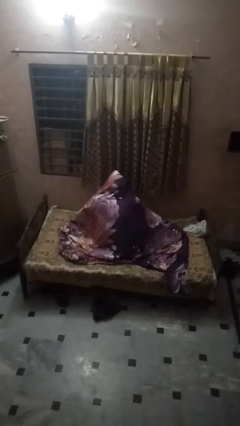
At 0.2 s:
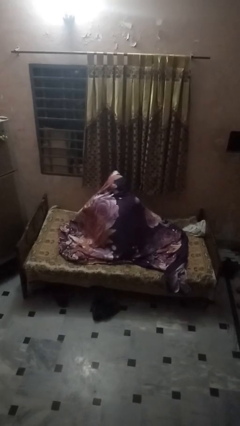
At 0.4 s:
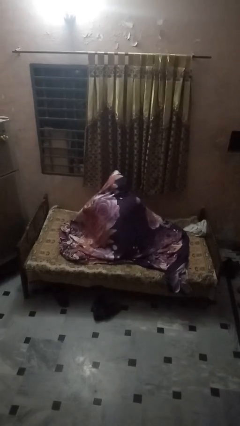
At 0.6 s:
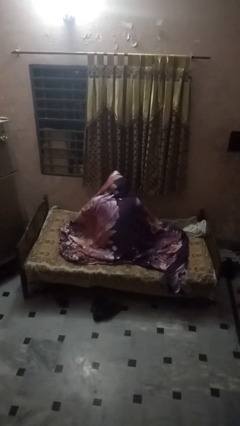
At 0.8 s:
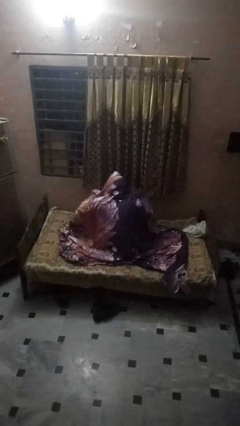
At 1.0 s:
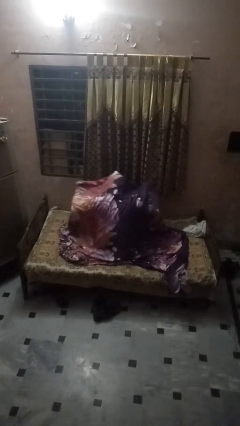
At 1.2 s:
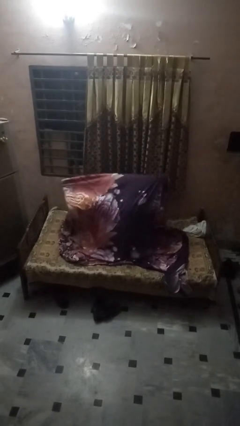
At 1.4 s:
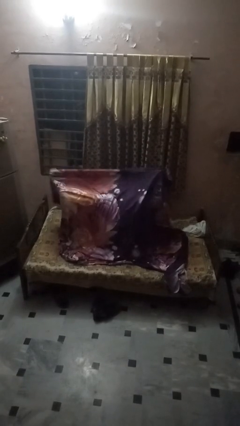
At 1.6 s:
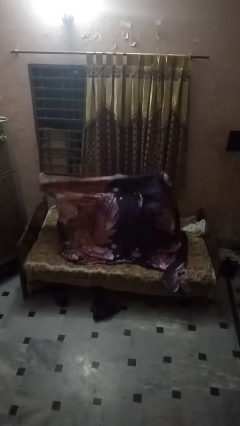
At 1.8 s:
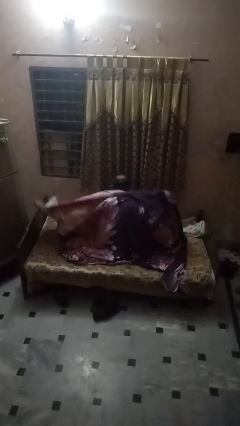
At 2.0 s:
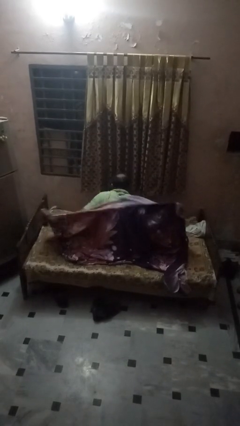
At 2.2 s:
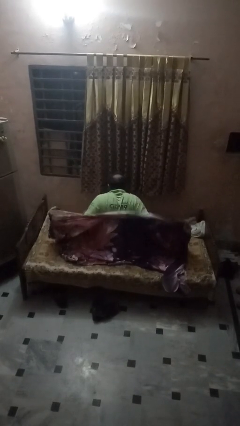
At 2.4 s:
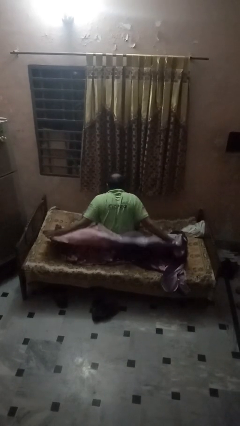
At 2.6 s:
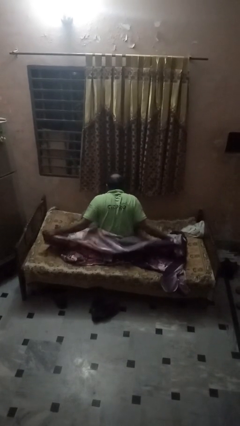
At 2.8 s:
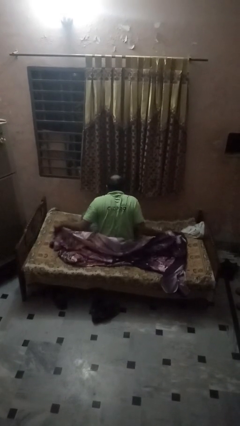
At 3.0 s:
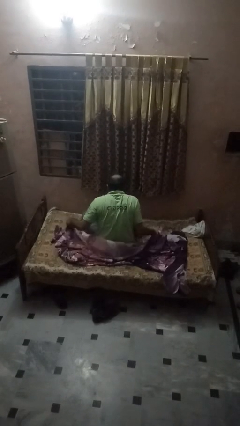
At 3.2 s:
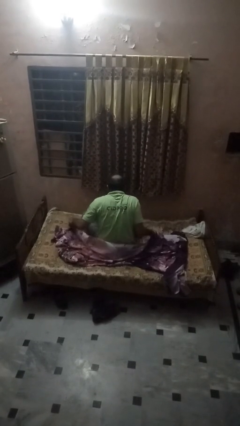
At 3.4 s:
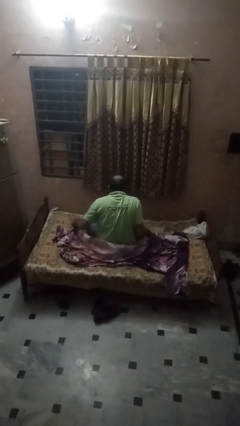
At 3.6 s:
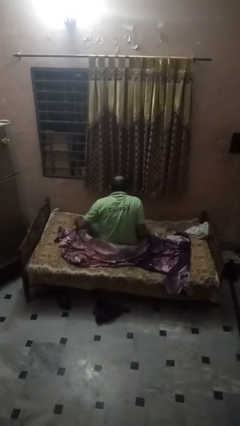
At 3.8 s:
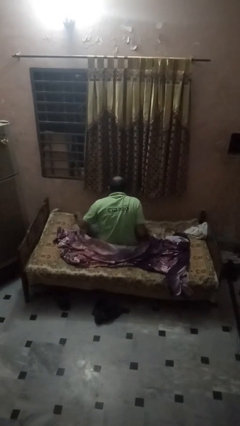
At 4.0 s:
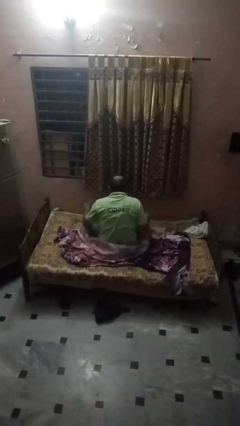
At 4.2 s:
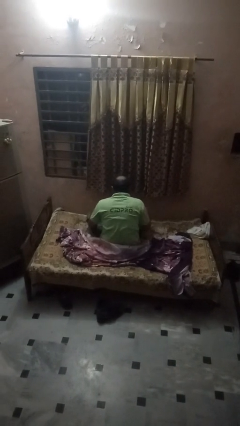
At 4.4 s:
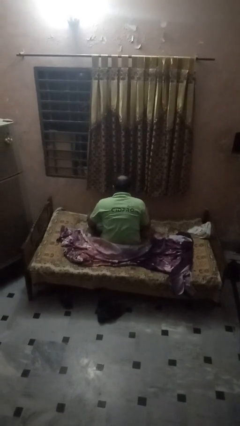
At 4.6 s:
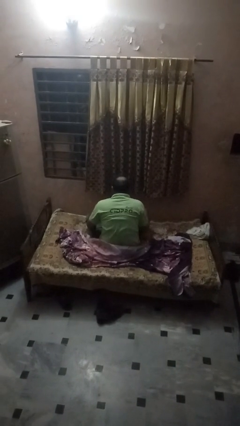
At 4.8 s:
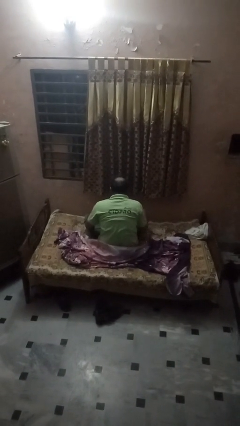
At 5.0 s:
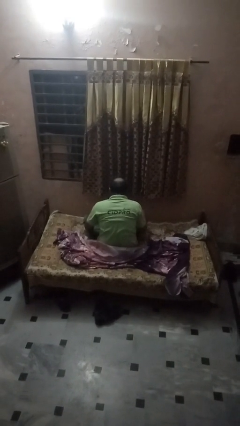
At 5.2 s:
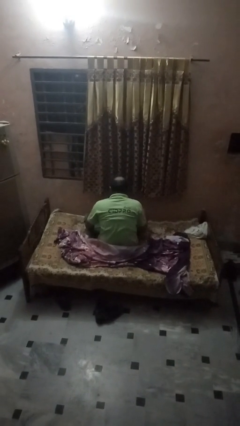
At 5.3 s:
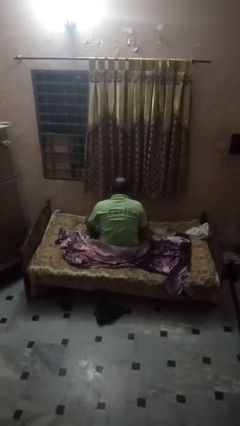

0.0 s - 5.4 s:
person uncovers with bedsheets

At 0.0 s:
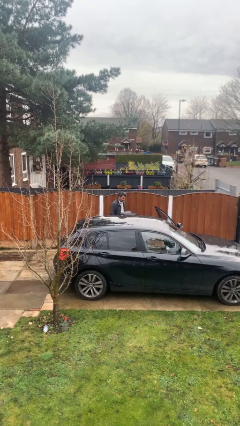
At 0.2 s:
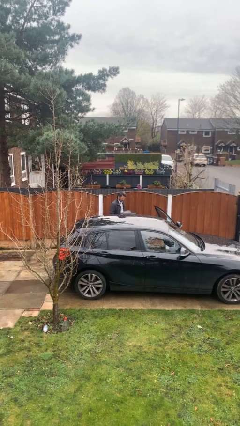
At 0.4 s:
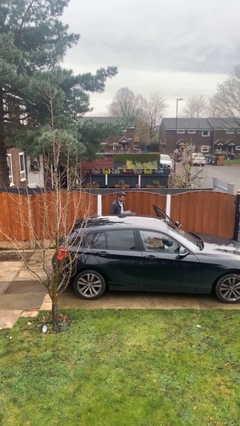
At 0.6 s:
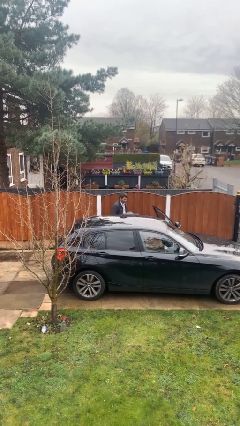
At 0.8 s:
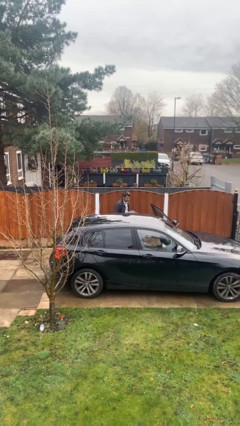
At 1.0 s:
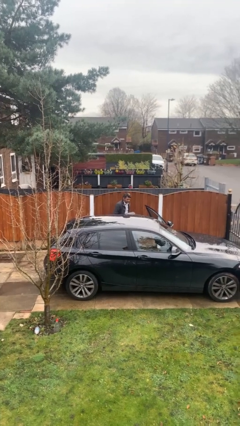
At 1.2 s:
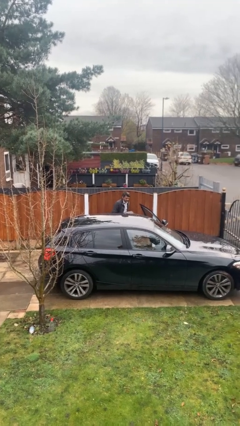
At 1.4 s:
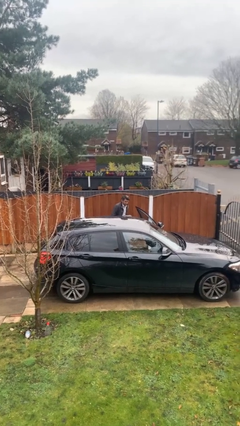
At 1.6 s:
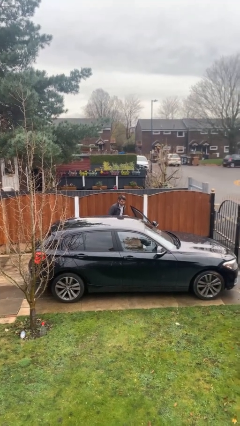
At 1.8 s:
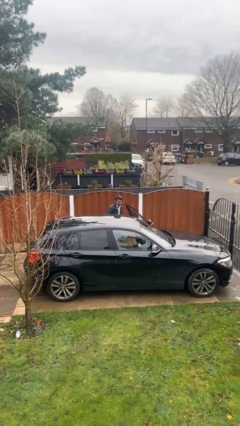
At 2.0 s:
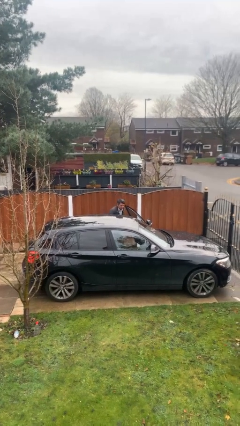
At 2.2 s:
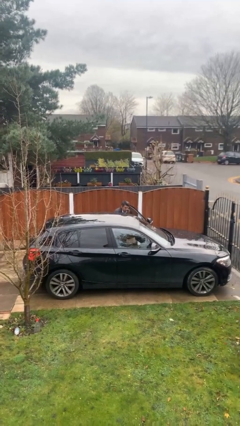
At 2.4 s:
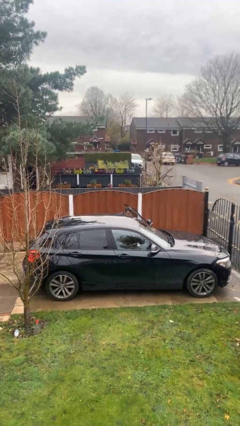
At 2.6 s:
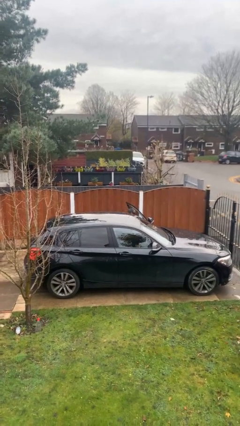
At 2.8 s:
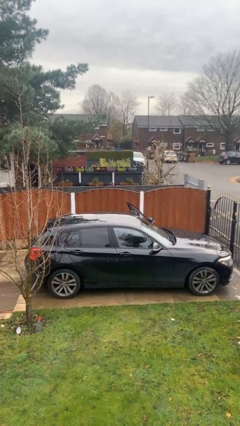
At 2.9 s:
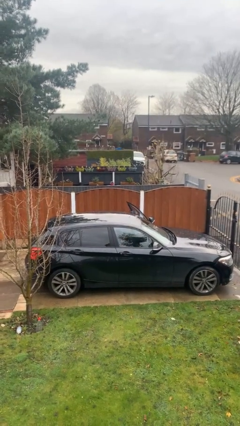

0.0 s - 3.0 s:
person loads car

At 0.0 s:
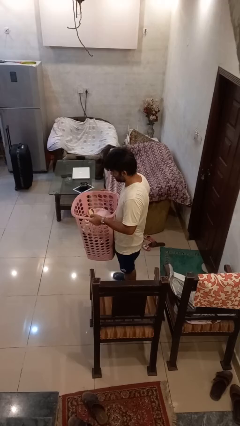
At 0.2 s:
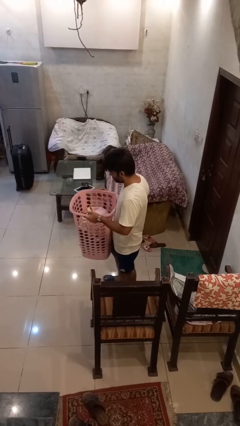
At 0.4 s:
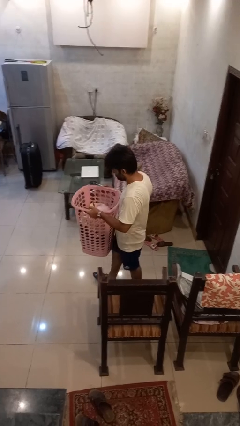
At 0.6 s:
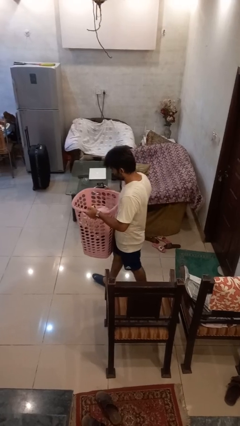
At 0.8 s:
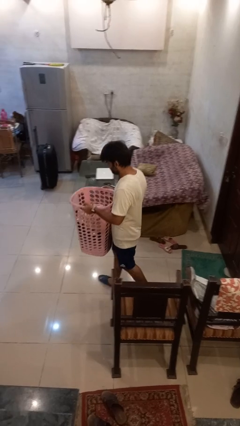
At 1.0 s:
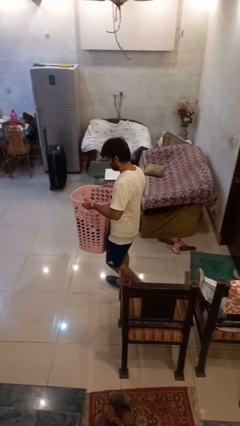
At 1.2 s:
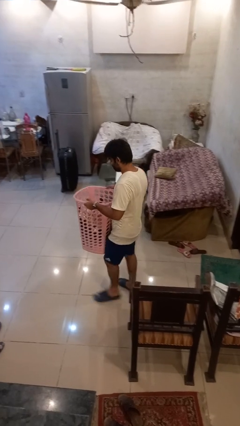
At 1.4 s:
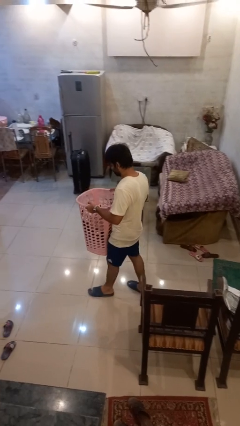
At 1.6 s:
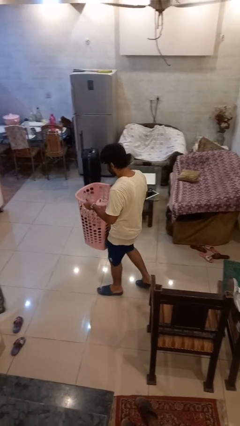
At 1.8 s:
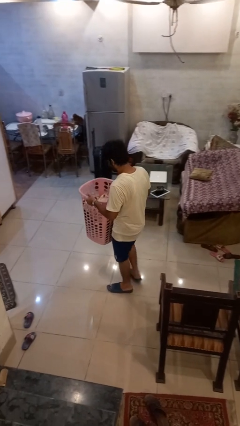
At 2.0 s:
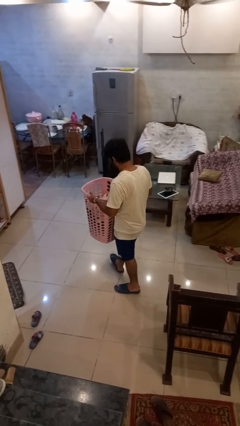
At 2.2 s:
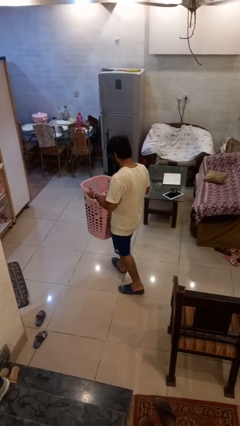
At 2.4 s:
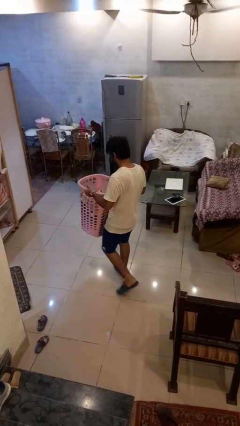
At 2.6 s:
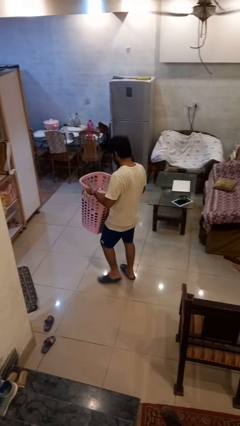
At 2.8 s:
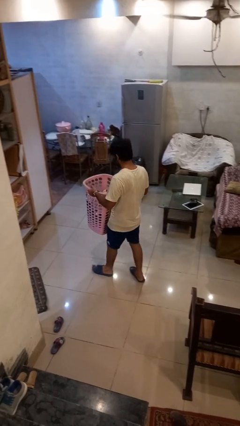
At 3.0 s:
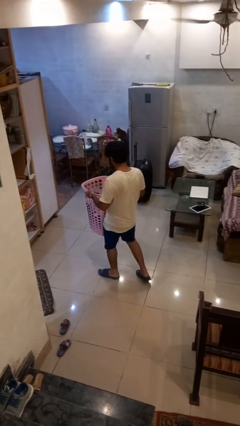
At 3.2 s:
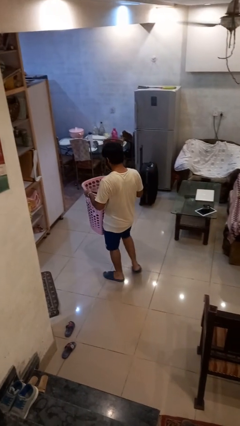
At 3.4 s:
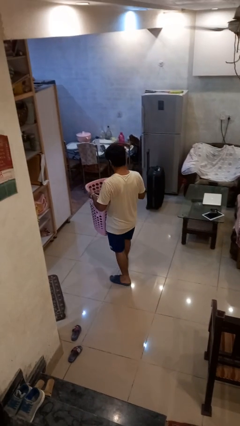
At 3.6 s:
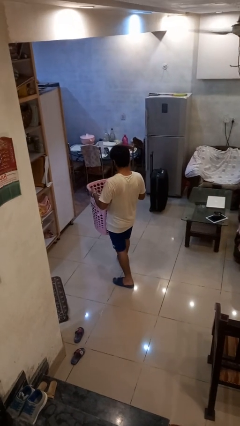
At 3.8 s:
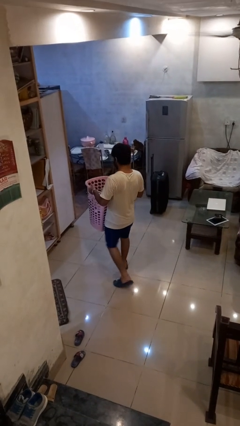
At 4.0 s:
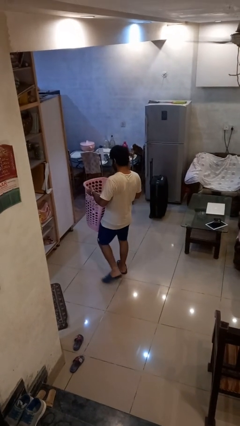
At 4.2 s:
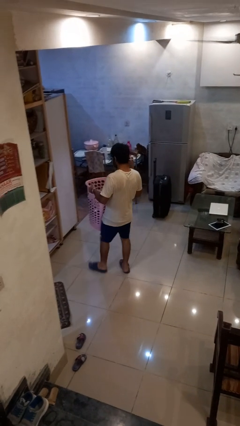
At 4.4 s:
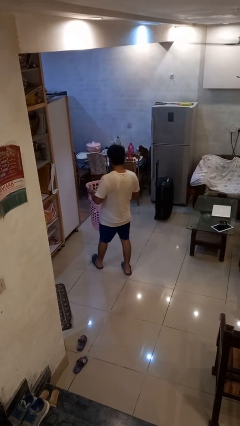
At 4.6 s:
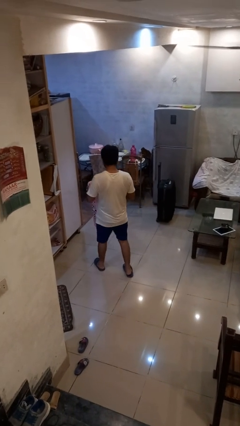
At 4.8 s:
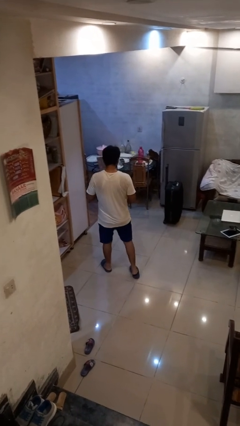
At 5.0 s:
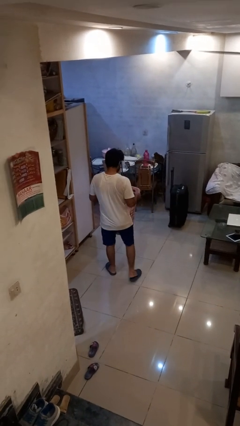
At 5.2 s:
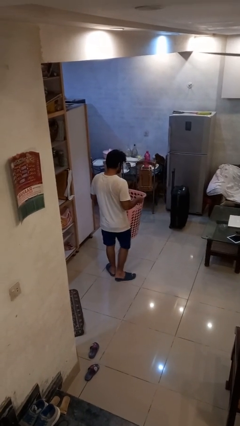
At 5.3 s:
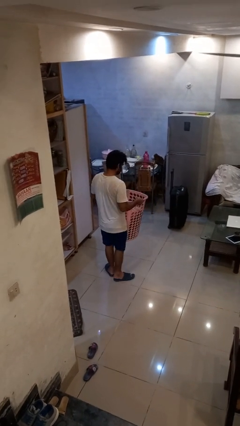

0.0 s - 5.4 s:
person carries laundry basket

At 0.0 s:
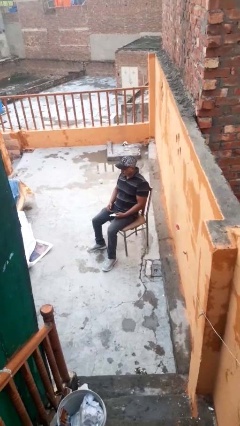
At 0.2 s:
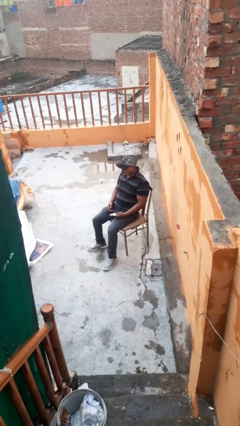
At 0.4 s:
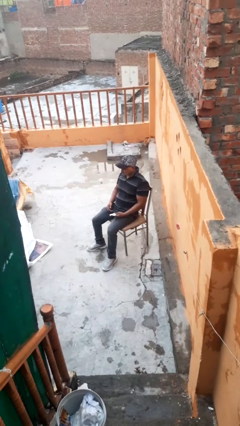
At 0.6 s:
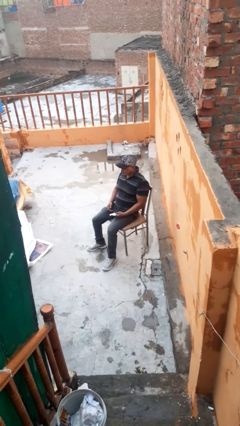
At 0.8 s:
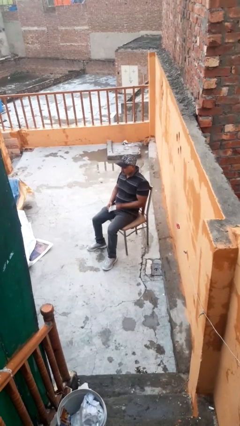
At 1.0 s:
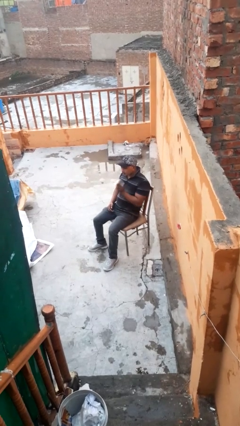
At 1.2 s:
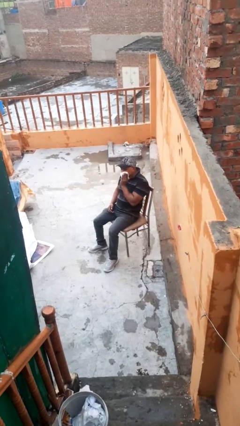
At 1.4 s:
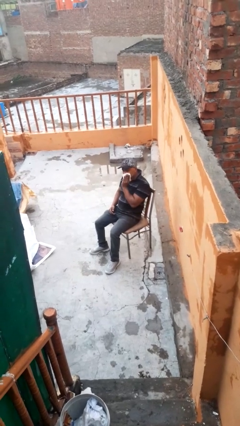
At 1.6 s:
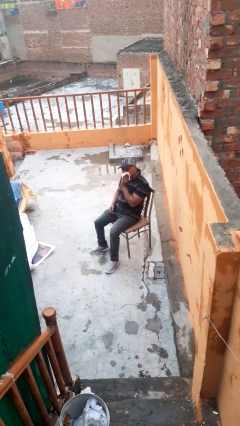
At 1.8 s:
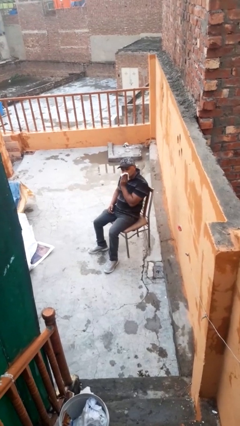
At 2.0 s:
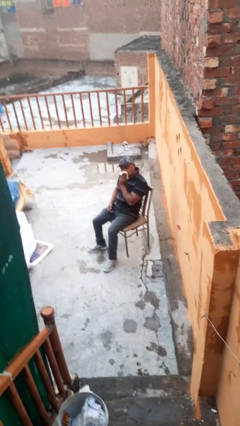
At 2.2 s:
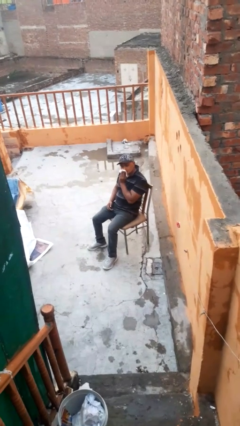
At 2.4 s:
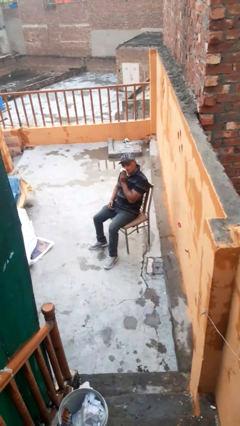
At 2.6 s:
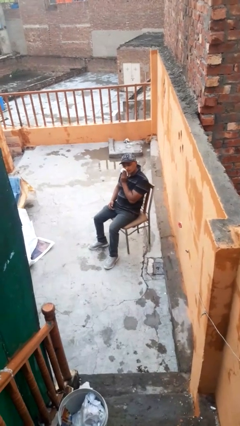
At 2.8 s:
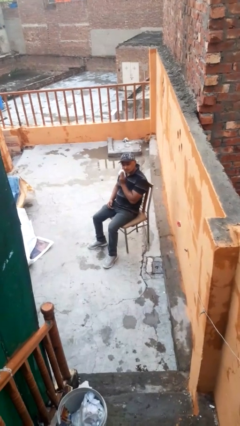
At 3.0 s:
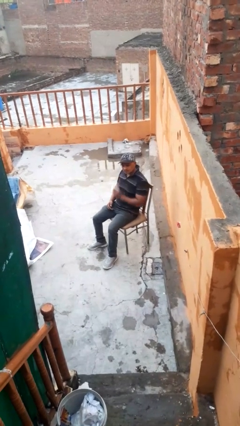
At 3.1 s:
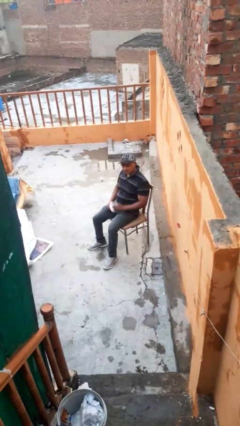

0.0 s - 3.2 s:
person wipes mouth with napkin

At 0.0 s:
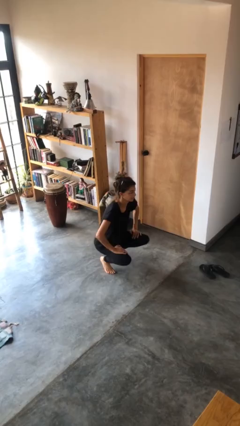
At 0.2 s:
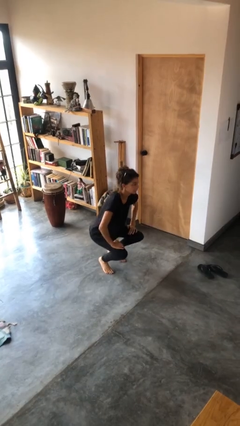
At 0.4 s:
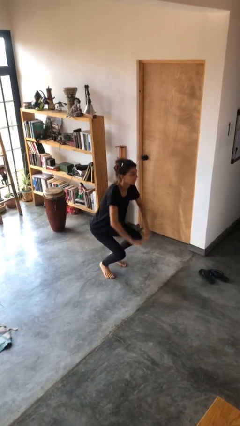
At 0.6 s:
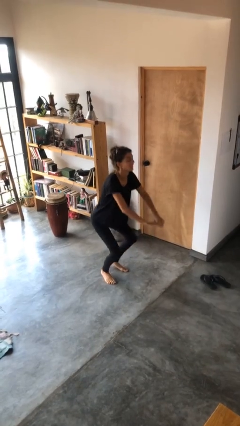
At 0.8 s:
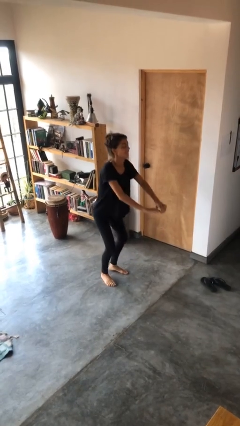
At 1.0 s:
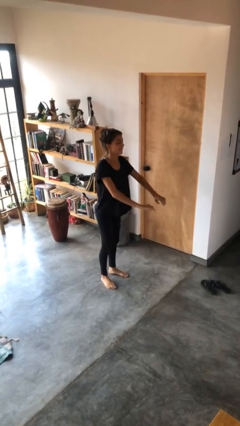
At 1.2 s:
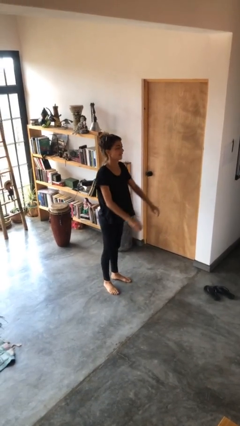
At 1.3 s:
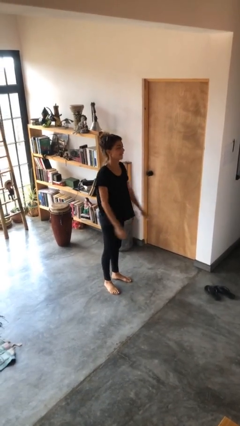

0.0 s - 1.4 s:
person stands up
